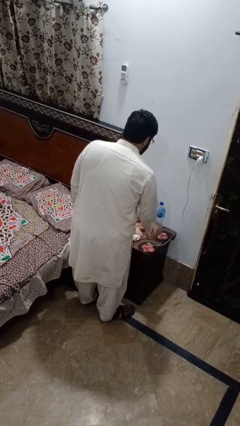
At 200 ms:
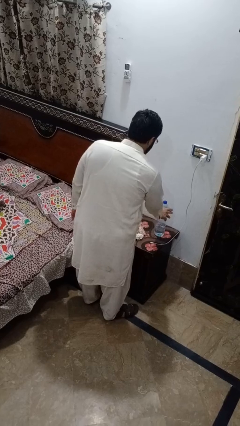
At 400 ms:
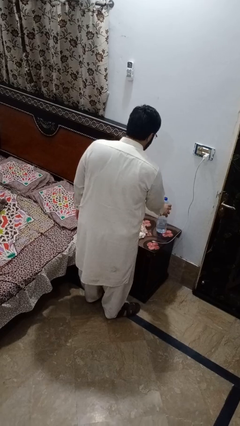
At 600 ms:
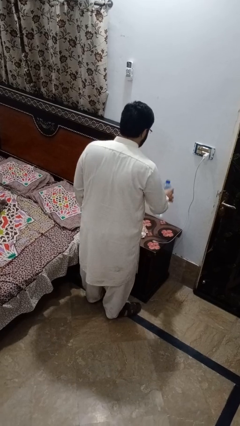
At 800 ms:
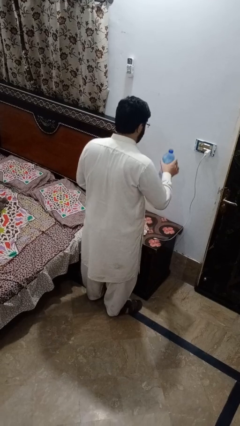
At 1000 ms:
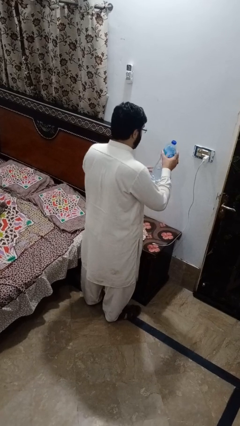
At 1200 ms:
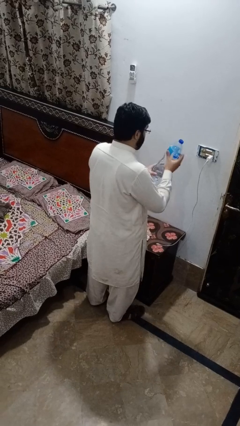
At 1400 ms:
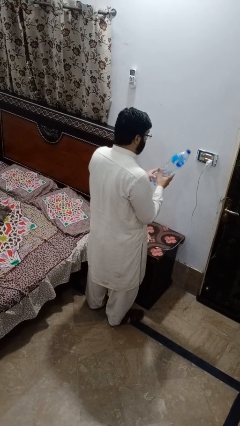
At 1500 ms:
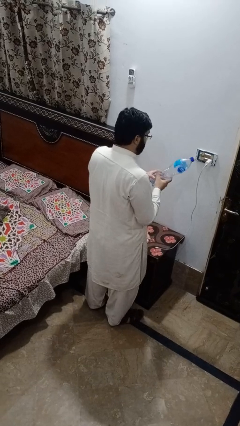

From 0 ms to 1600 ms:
person picks up object from countertop

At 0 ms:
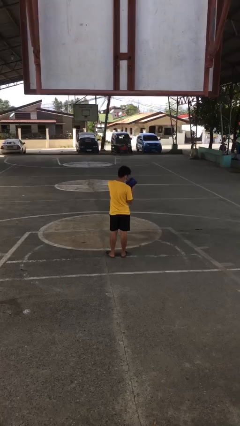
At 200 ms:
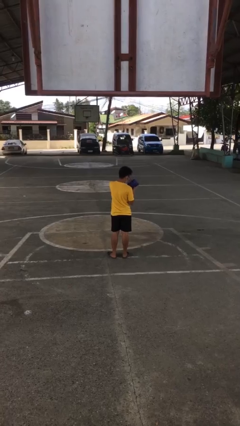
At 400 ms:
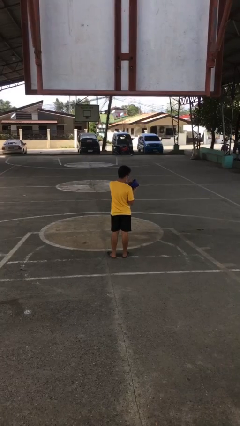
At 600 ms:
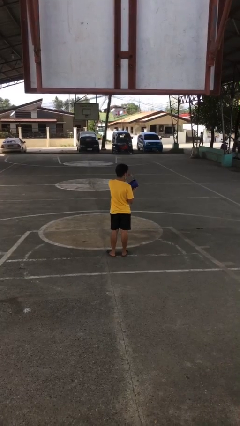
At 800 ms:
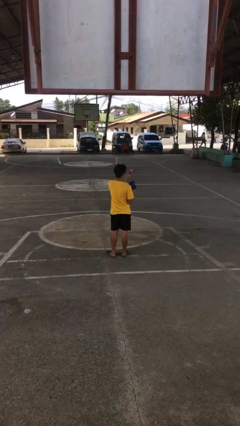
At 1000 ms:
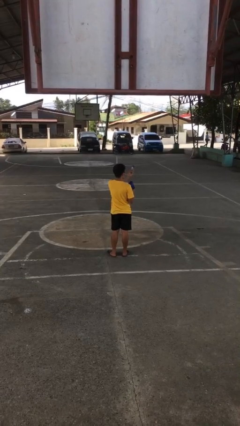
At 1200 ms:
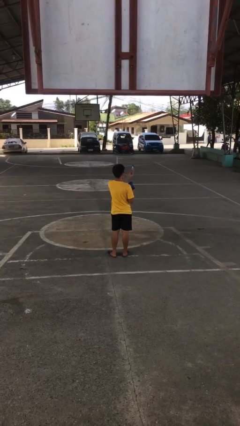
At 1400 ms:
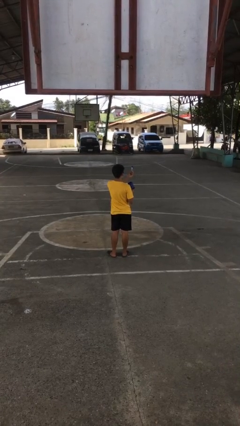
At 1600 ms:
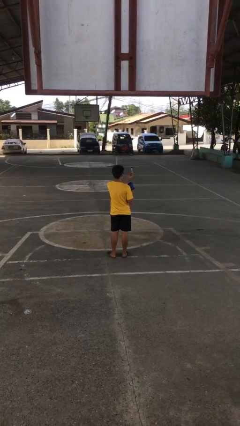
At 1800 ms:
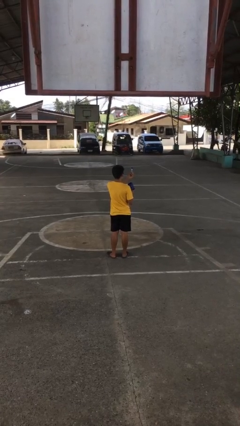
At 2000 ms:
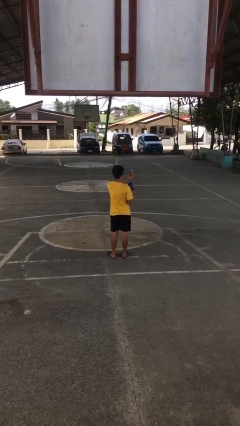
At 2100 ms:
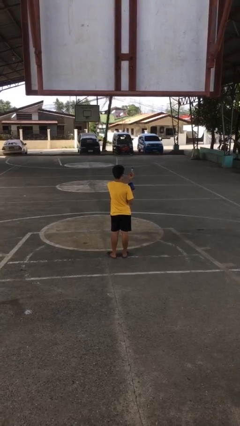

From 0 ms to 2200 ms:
person takes object from purse

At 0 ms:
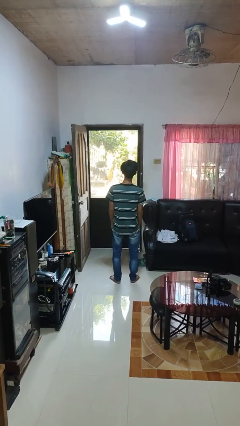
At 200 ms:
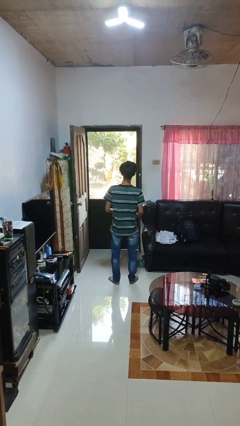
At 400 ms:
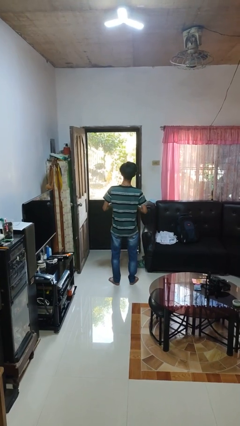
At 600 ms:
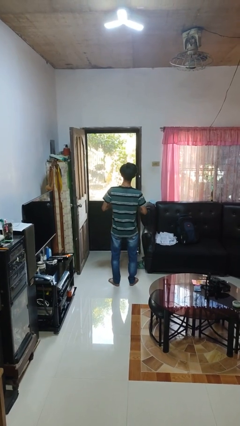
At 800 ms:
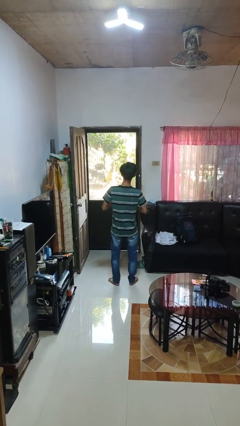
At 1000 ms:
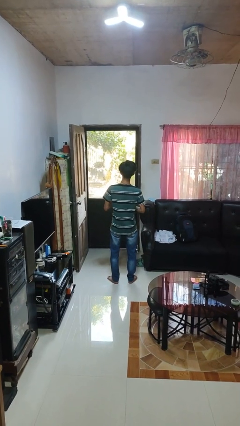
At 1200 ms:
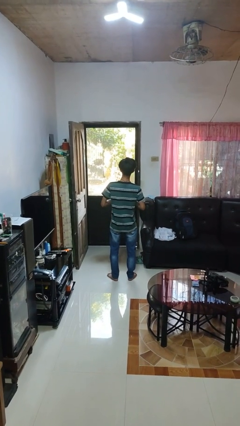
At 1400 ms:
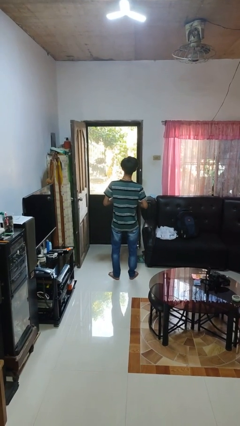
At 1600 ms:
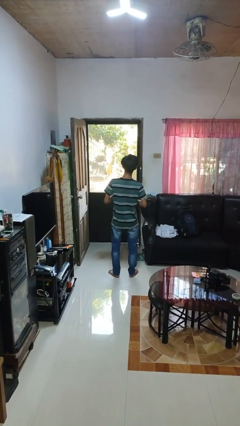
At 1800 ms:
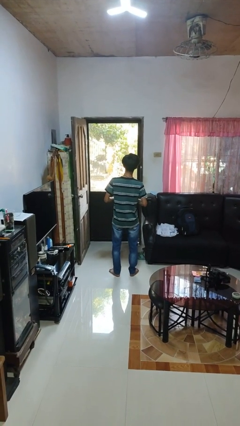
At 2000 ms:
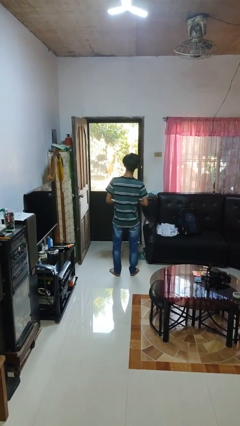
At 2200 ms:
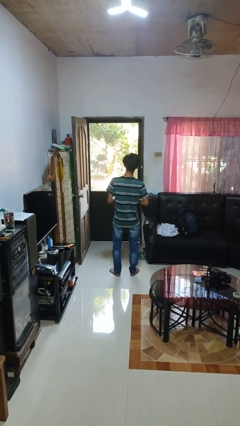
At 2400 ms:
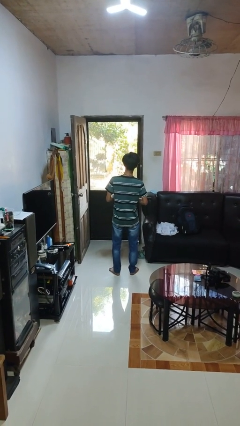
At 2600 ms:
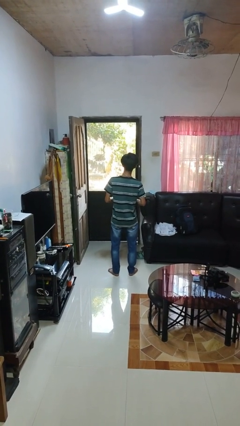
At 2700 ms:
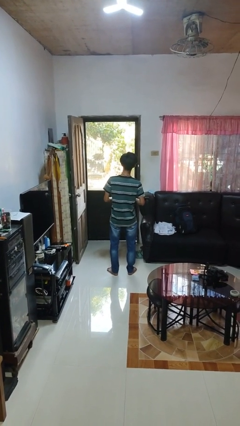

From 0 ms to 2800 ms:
person buttons shirt

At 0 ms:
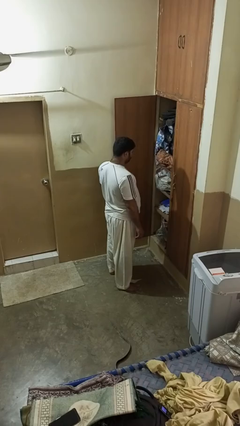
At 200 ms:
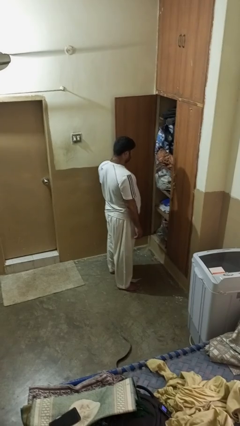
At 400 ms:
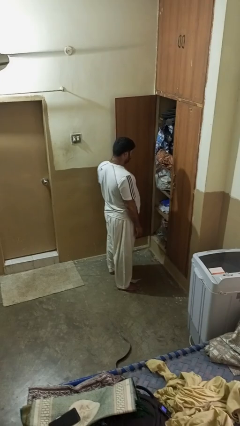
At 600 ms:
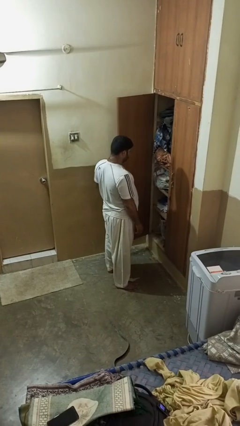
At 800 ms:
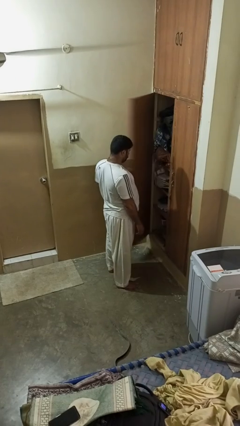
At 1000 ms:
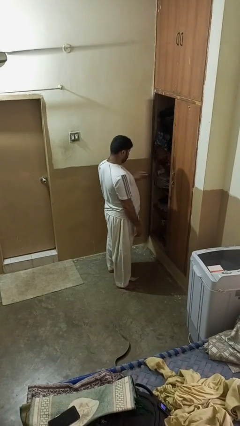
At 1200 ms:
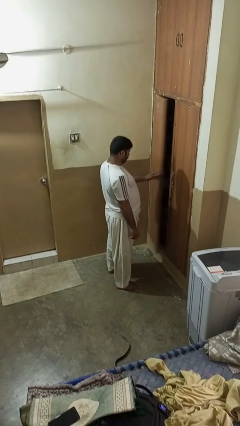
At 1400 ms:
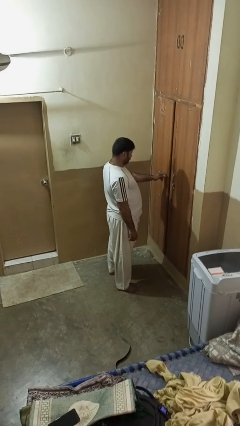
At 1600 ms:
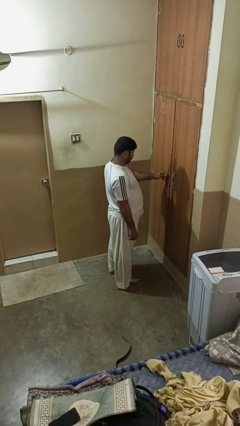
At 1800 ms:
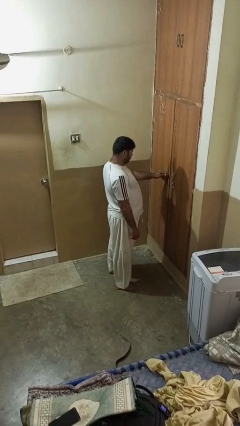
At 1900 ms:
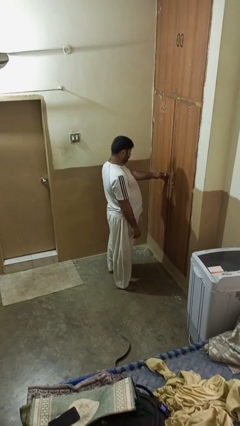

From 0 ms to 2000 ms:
person closes closet door

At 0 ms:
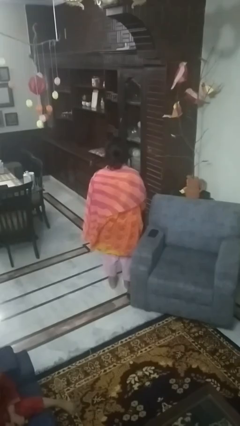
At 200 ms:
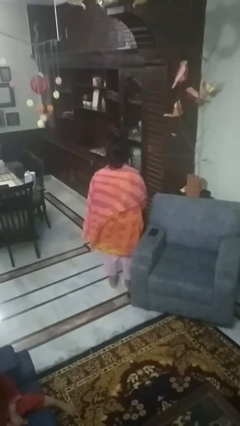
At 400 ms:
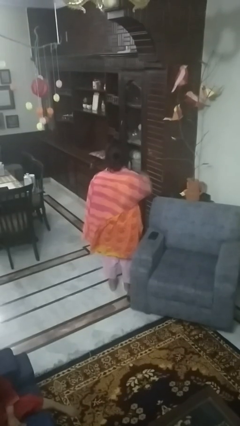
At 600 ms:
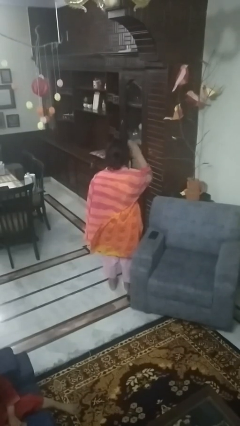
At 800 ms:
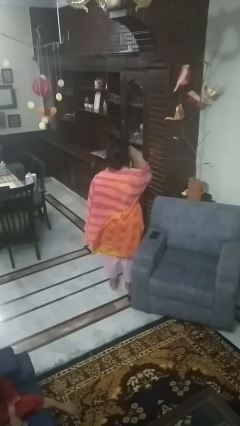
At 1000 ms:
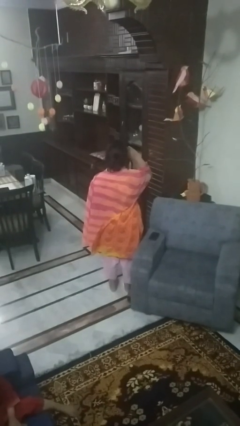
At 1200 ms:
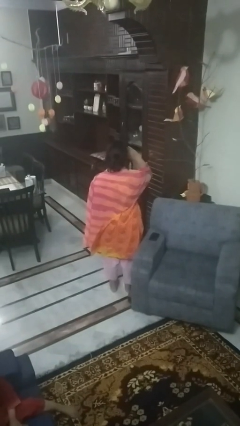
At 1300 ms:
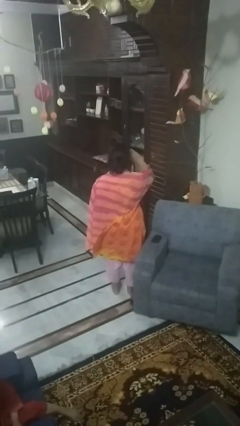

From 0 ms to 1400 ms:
person salutes

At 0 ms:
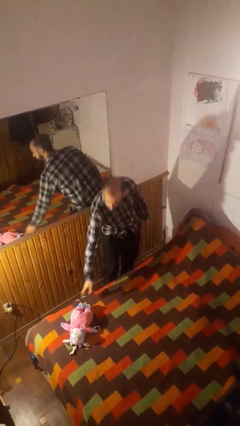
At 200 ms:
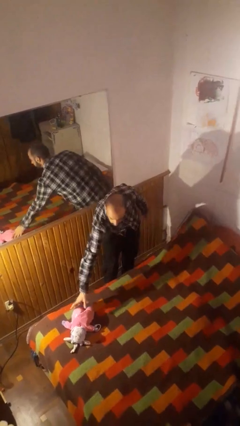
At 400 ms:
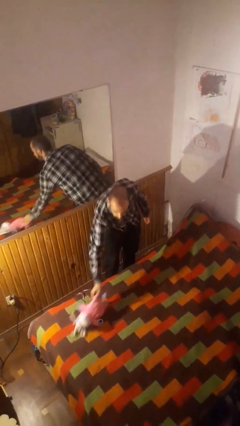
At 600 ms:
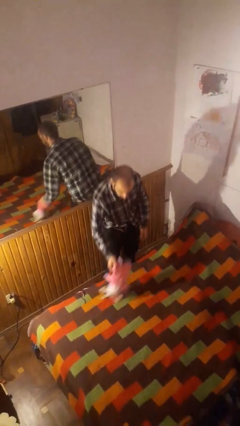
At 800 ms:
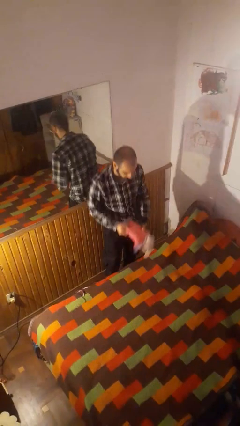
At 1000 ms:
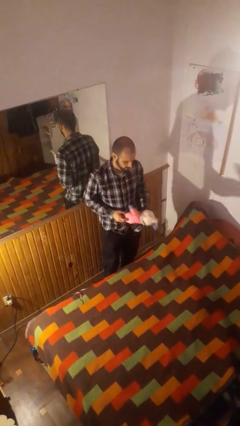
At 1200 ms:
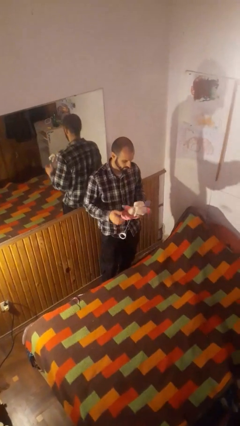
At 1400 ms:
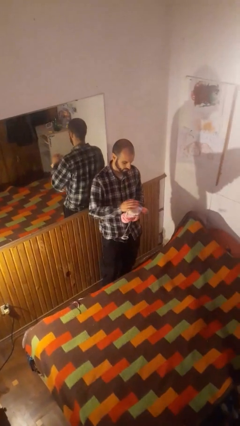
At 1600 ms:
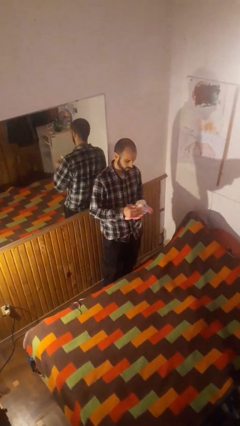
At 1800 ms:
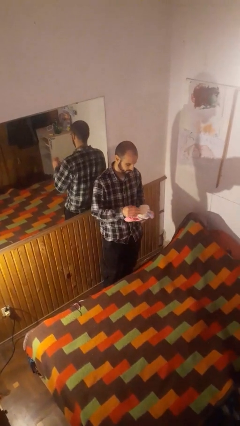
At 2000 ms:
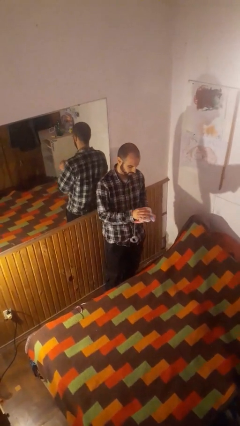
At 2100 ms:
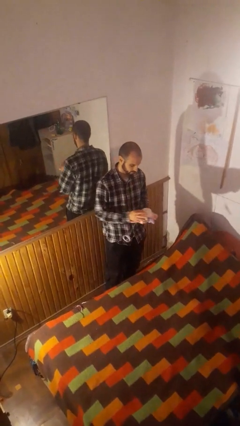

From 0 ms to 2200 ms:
person picks up object from bed

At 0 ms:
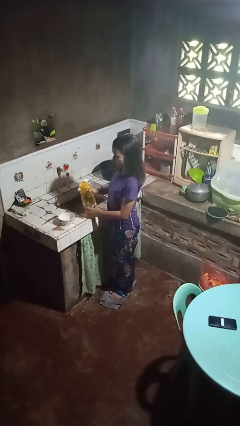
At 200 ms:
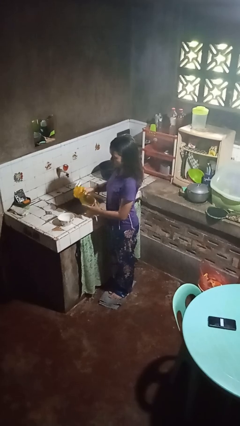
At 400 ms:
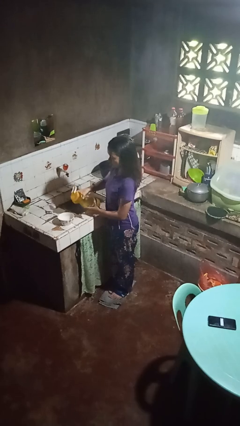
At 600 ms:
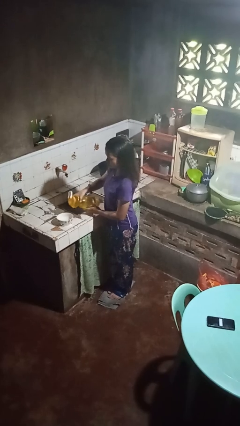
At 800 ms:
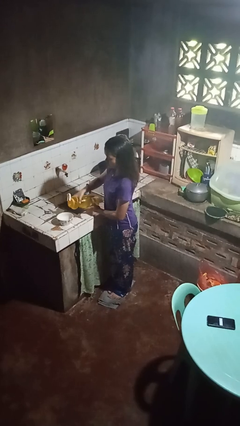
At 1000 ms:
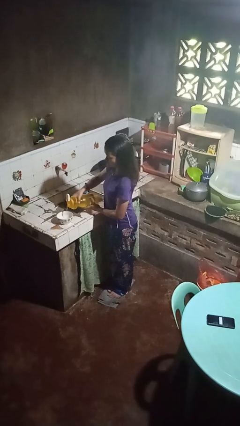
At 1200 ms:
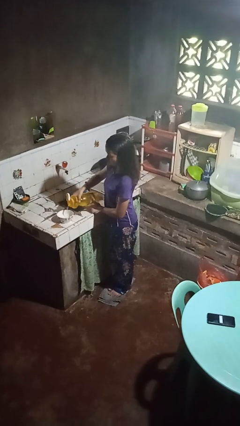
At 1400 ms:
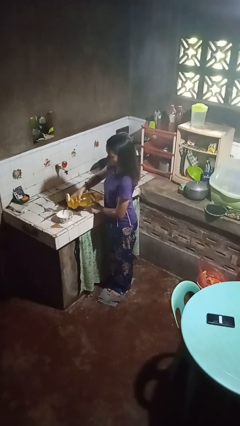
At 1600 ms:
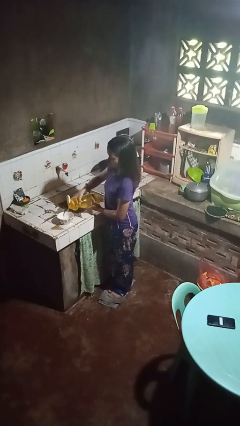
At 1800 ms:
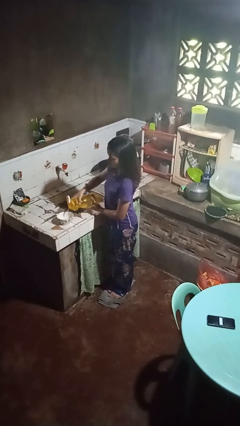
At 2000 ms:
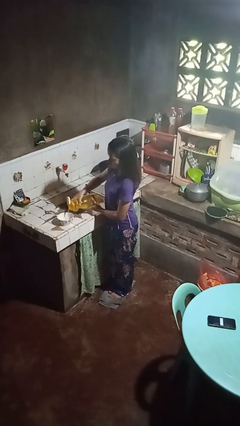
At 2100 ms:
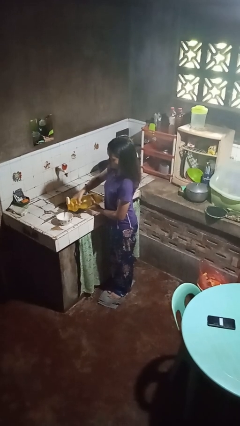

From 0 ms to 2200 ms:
person pours into bowl

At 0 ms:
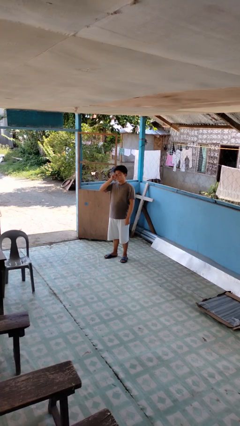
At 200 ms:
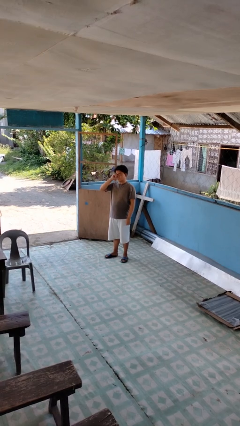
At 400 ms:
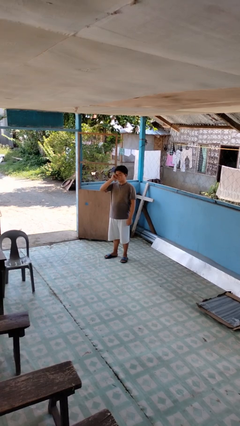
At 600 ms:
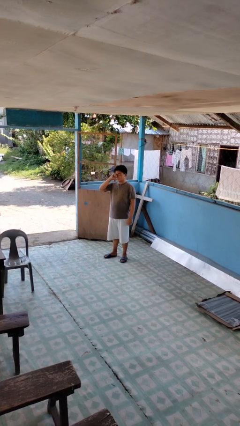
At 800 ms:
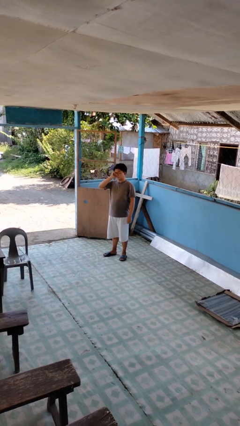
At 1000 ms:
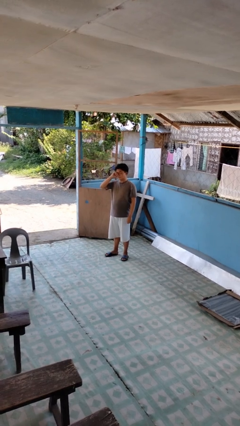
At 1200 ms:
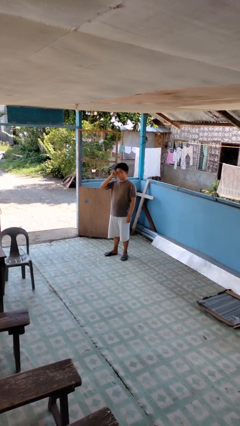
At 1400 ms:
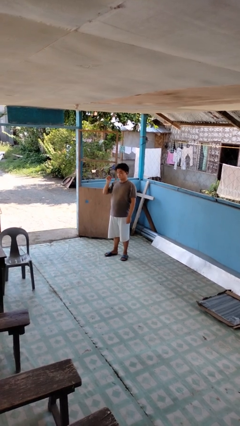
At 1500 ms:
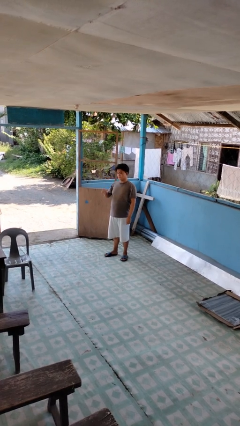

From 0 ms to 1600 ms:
person rubs eyes

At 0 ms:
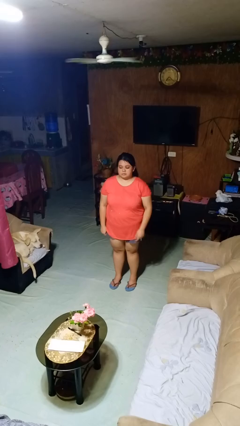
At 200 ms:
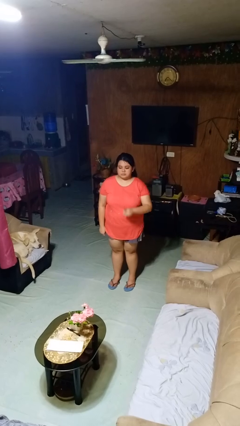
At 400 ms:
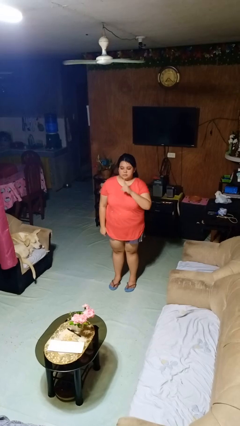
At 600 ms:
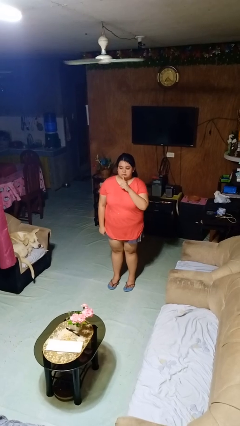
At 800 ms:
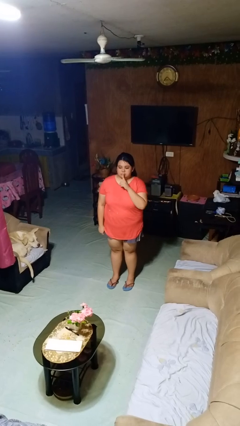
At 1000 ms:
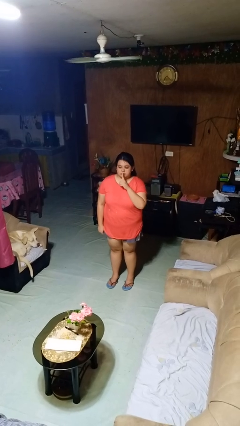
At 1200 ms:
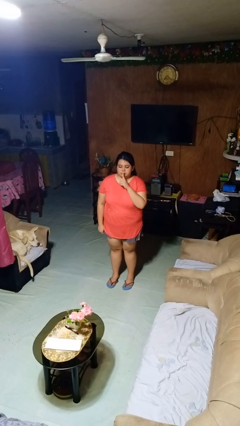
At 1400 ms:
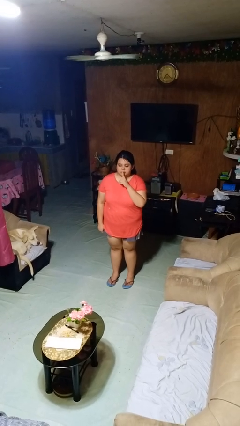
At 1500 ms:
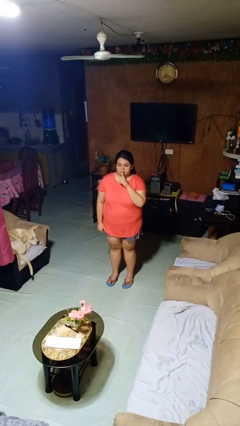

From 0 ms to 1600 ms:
person gestures be quiet
